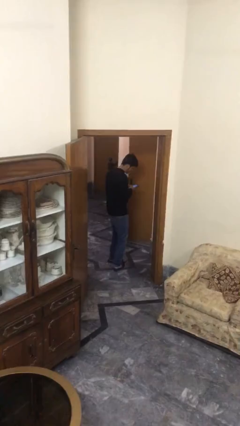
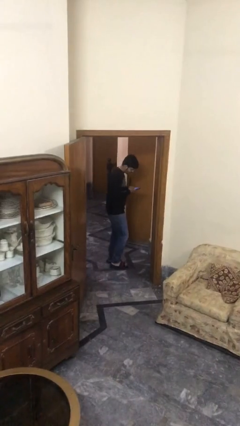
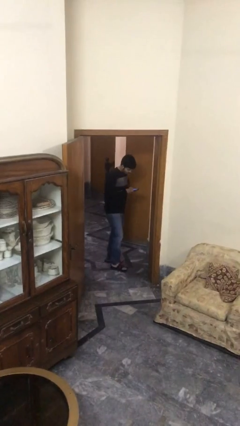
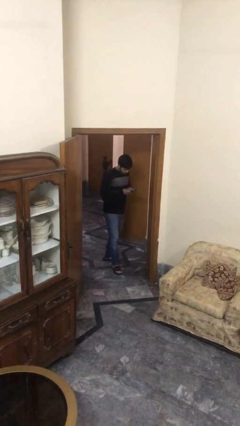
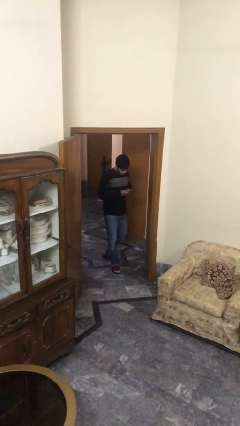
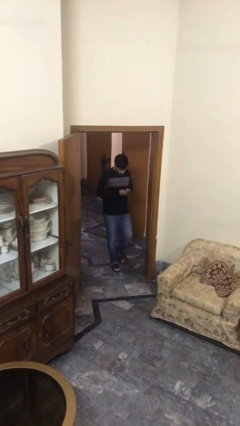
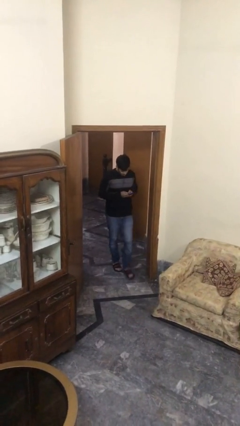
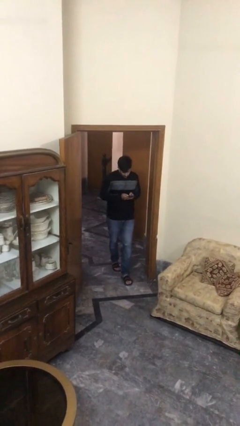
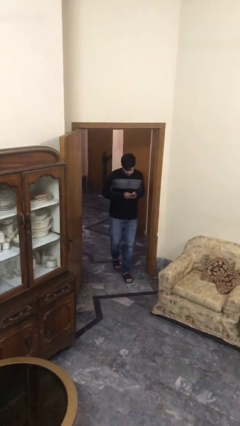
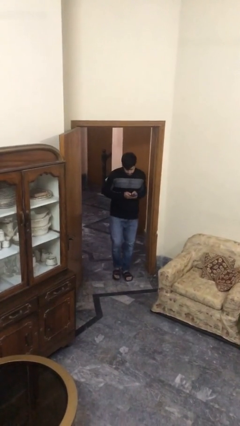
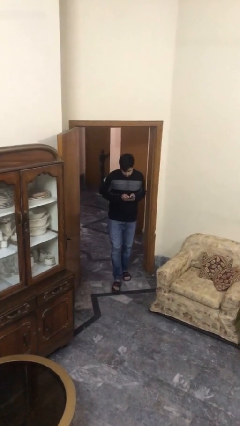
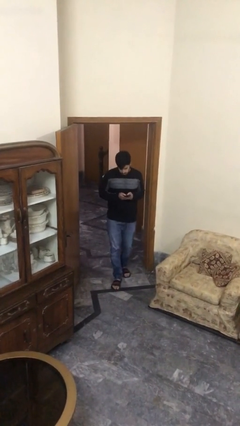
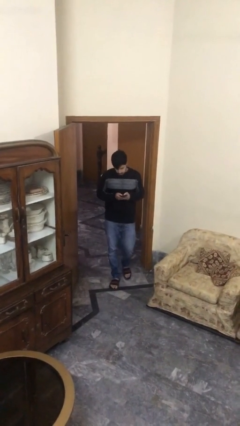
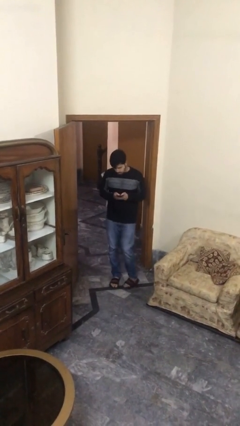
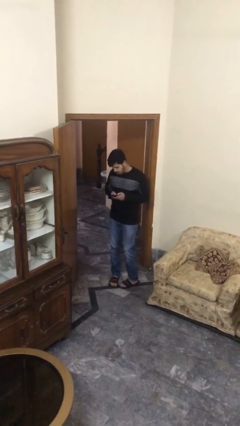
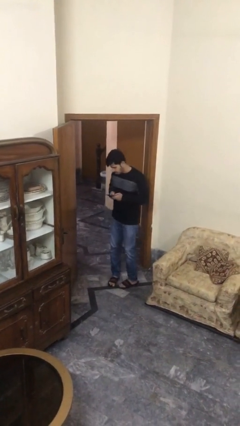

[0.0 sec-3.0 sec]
person enters scene through structure

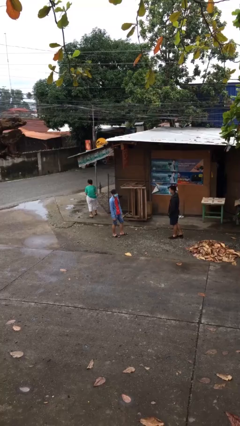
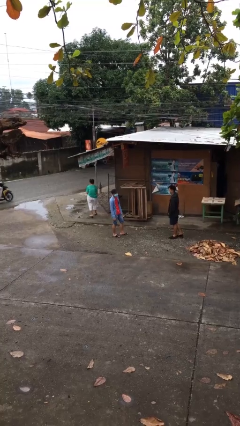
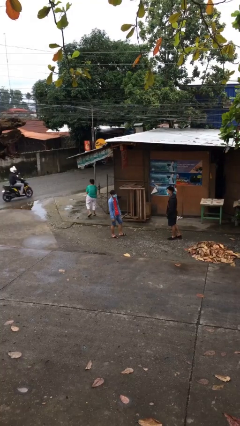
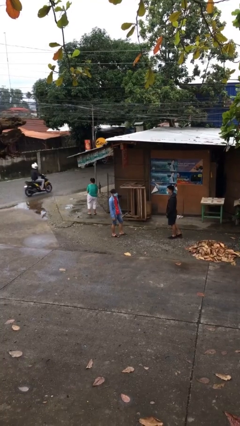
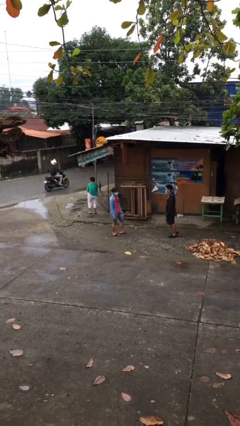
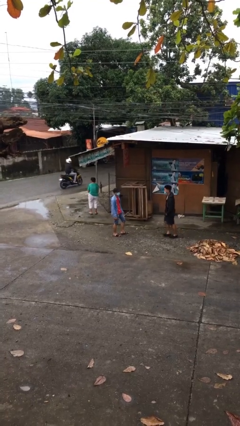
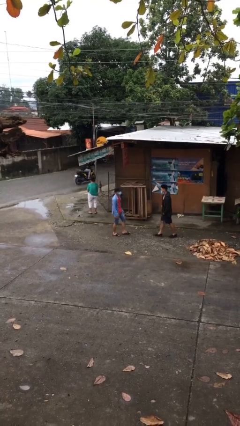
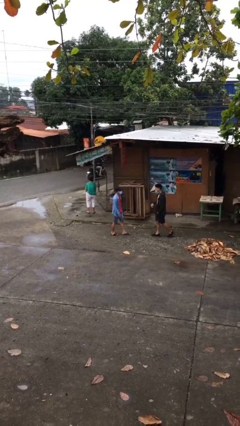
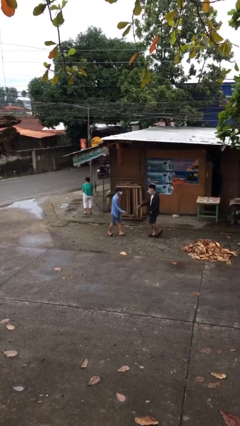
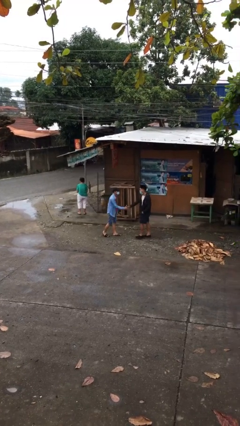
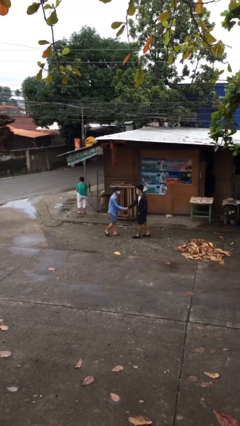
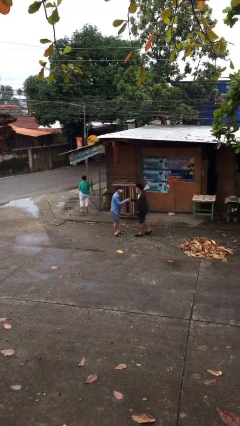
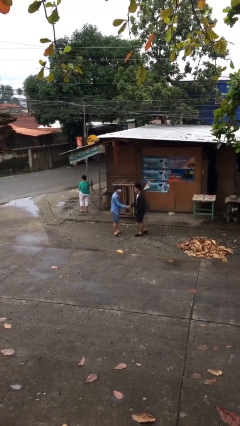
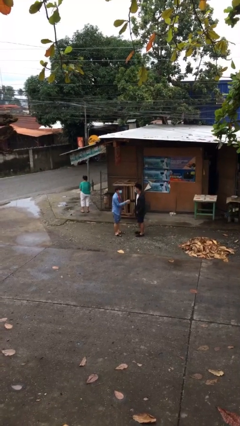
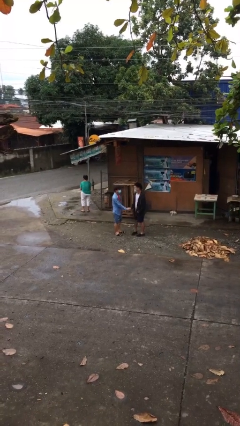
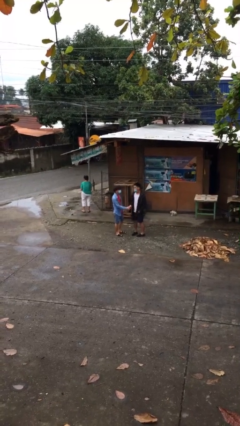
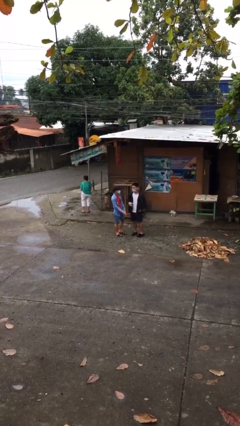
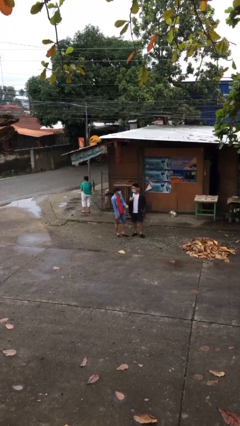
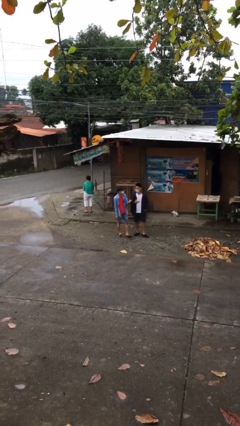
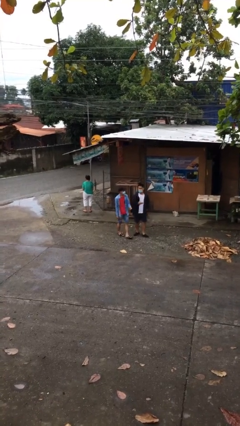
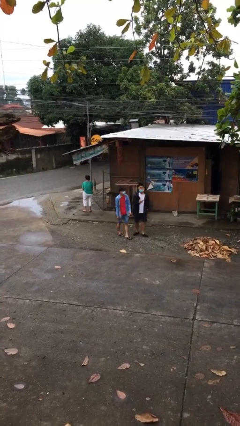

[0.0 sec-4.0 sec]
person shakes hand

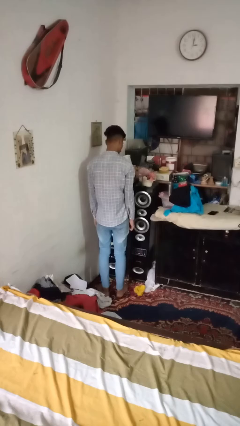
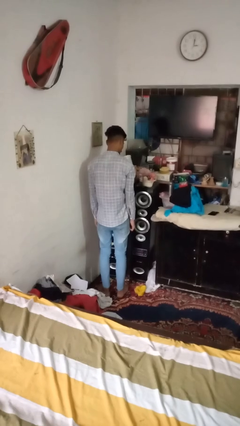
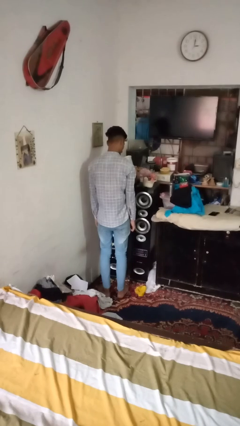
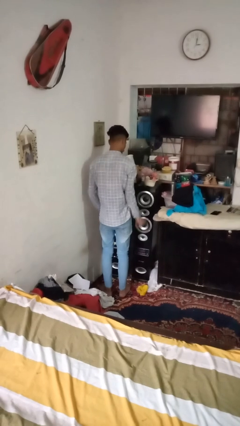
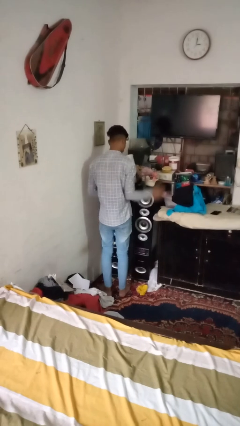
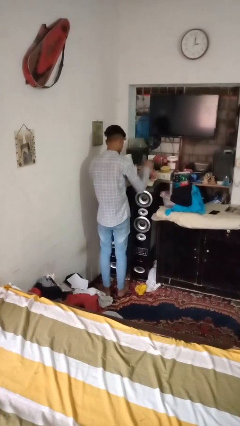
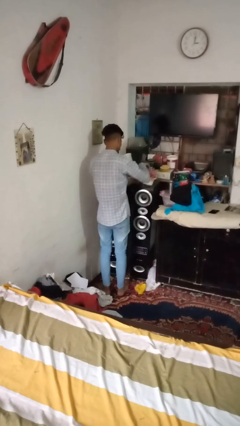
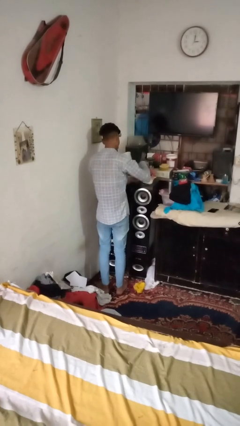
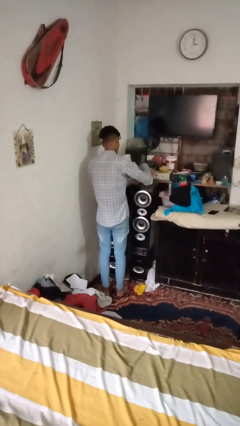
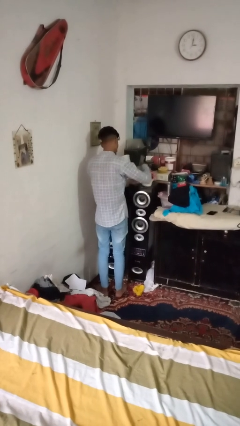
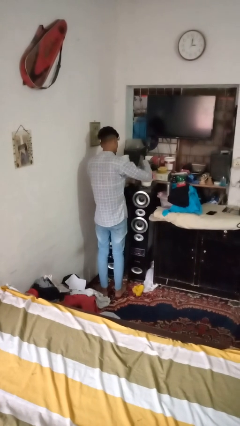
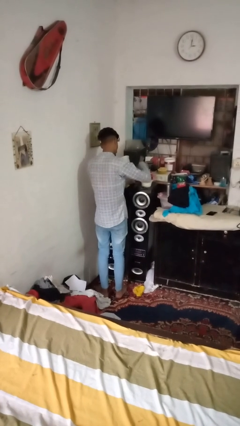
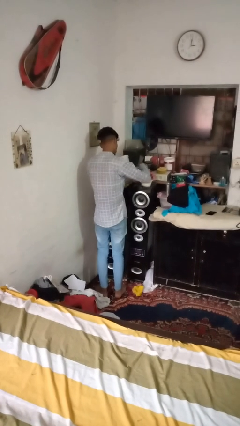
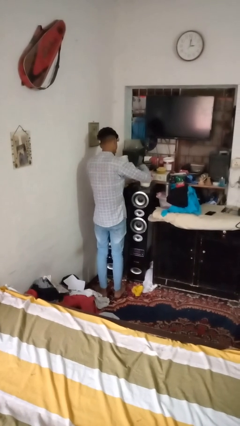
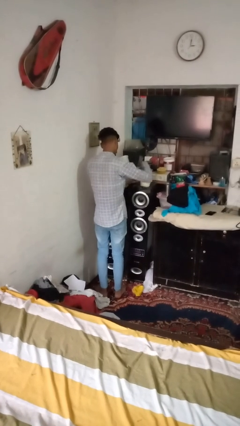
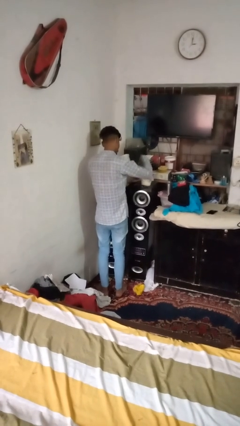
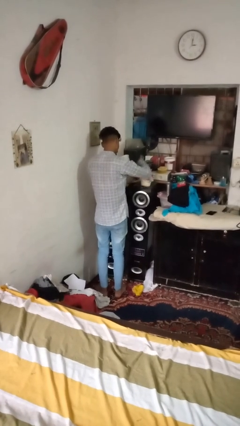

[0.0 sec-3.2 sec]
person arranges flowers in vase

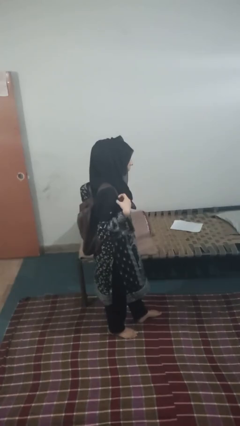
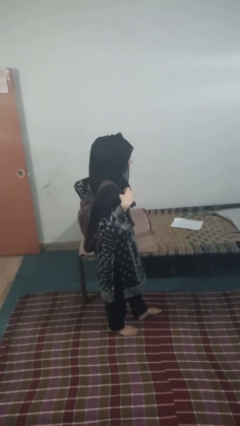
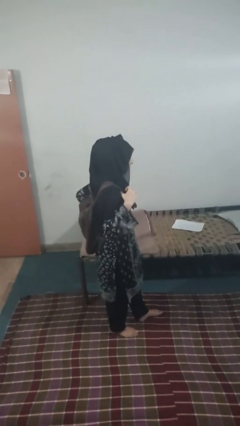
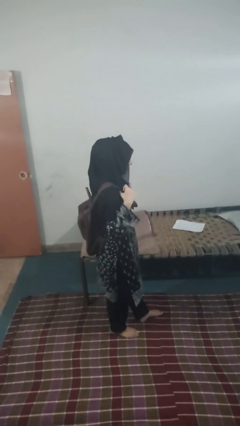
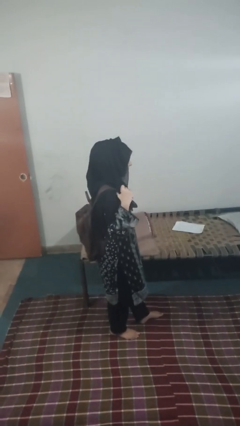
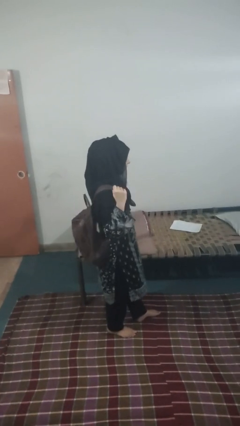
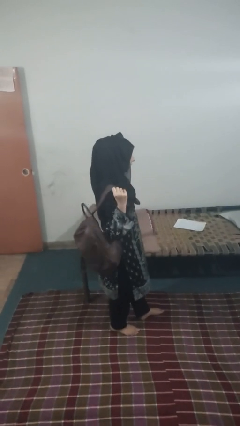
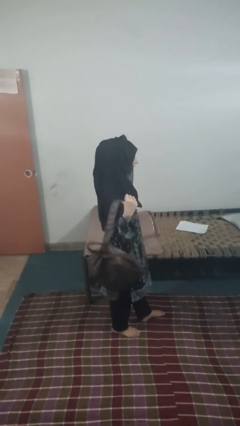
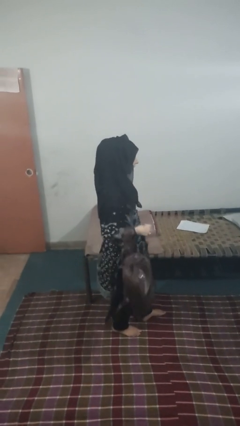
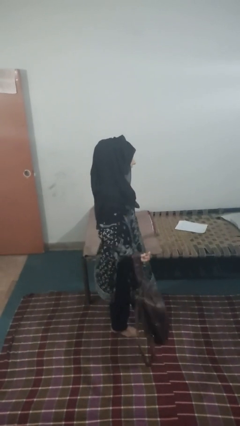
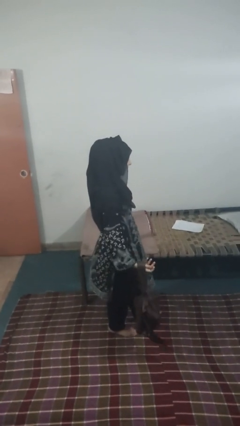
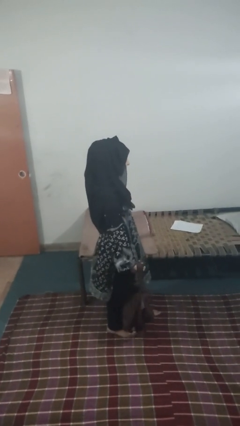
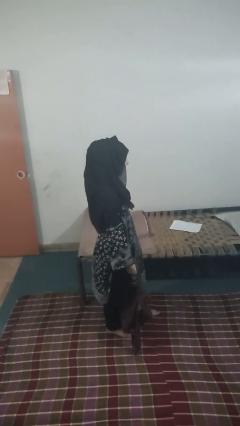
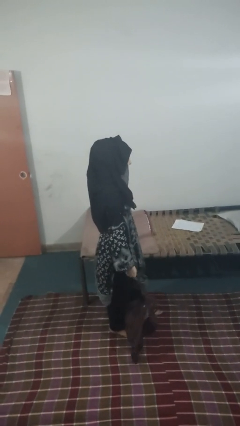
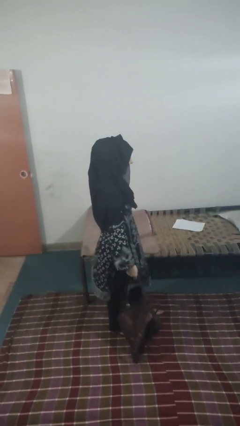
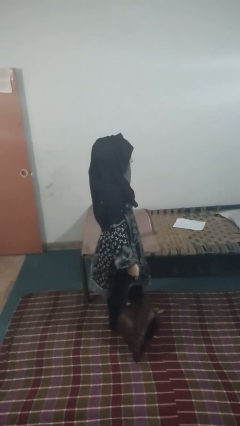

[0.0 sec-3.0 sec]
person takes off backpack

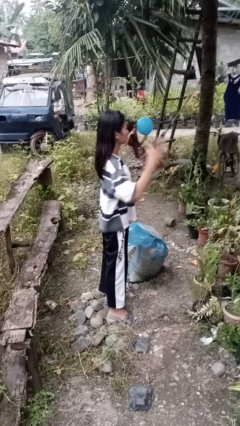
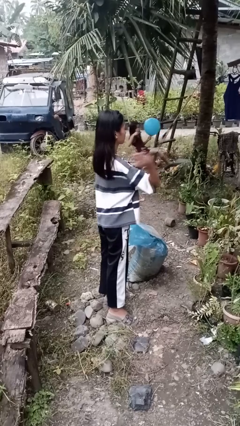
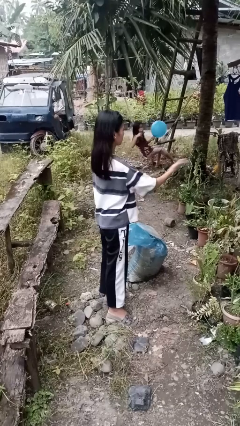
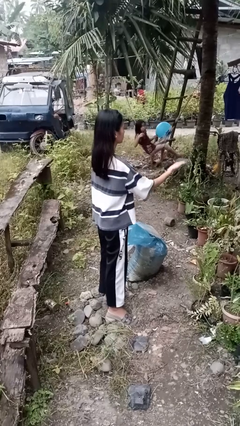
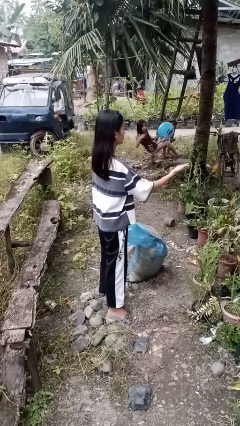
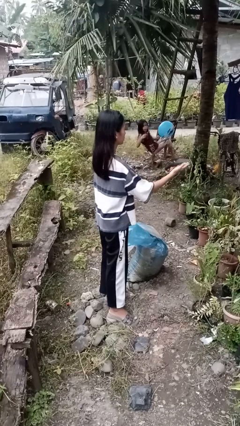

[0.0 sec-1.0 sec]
person karate chop

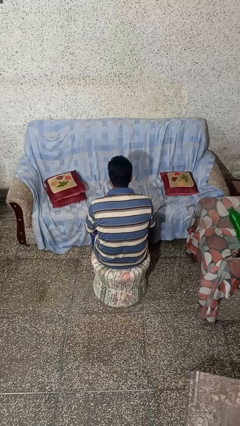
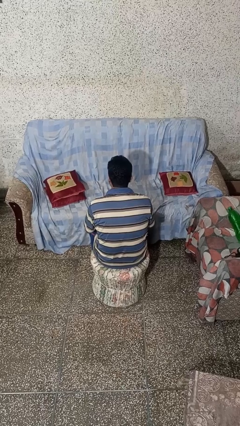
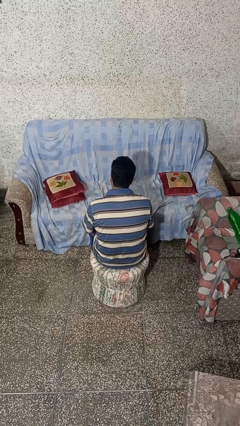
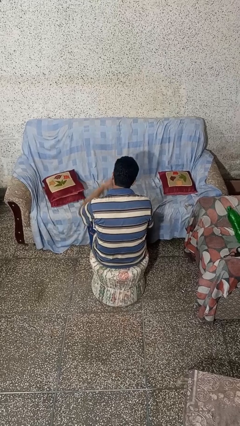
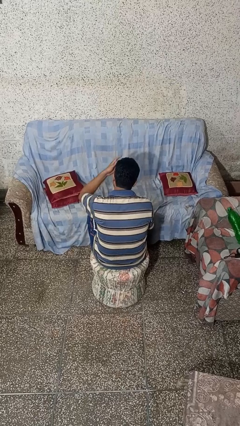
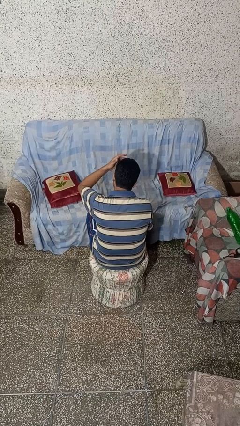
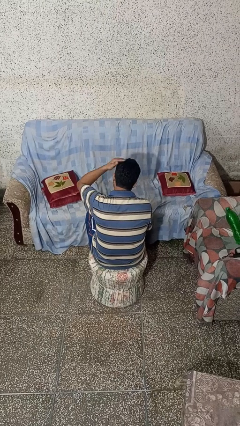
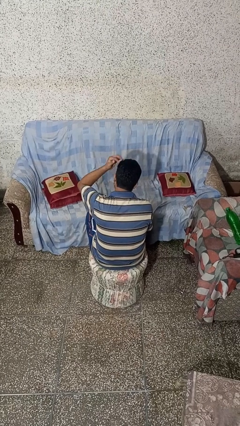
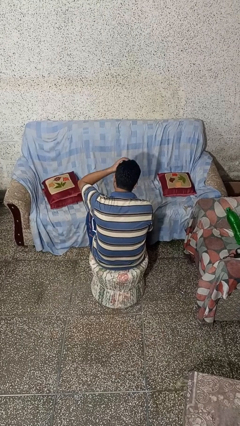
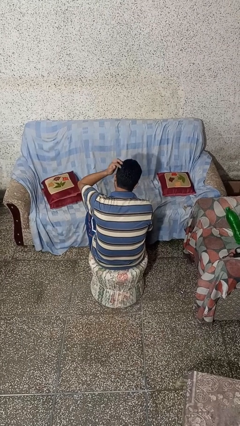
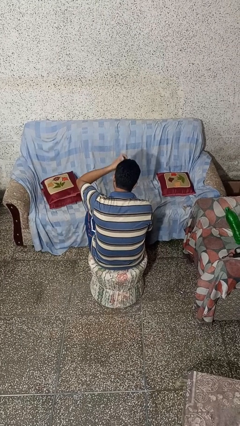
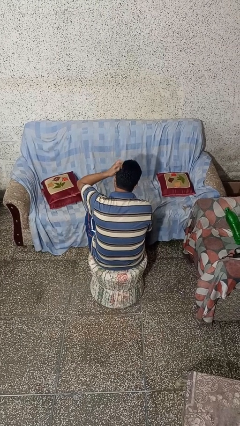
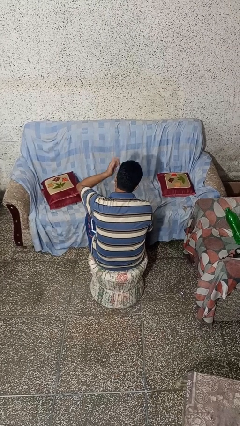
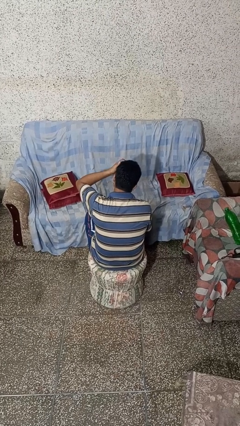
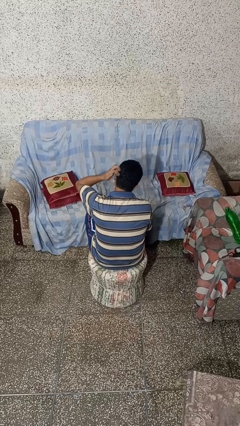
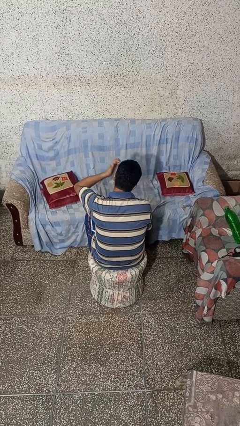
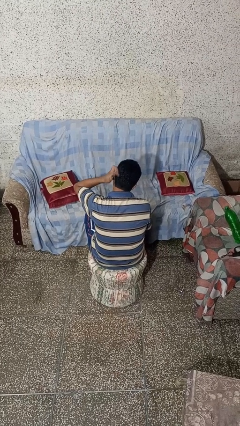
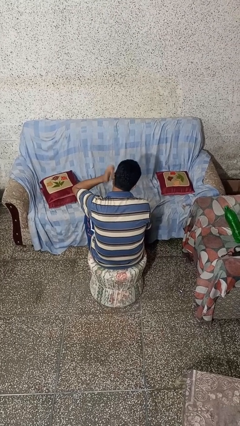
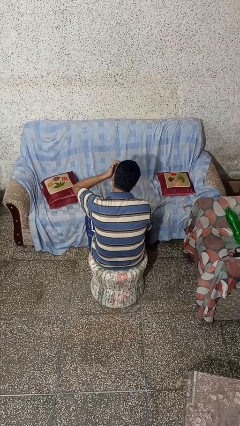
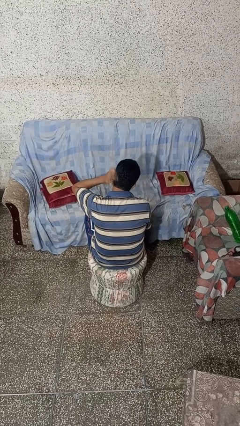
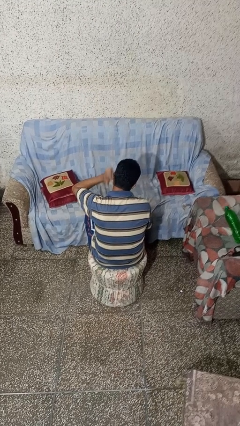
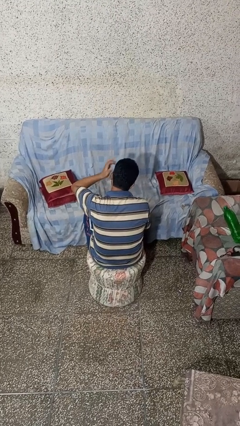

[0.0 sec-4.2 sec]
person strokes hair
